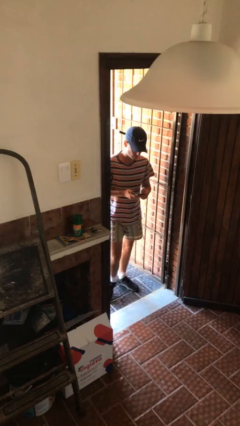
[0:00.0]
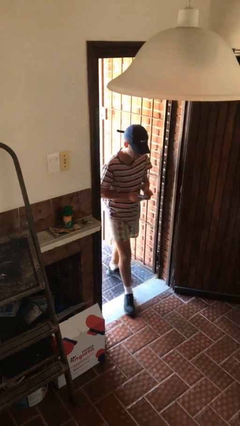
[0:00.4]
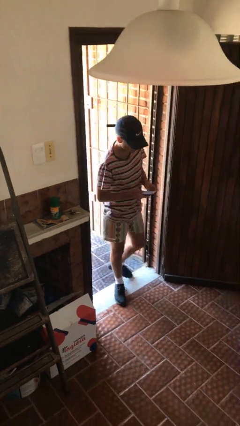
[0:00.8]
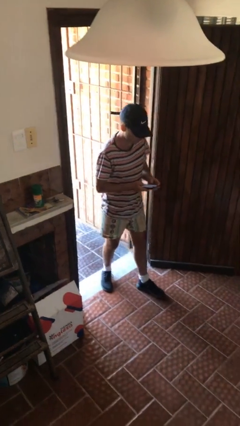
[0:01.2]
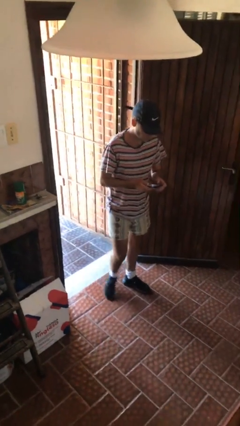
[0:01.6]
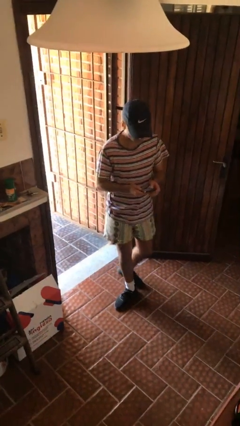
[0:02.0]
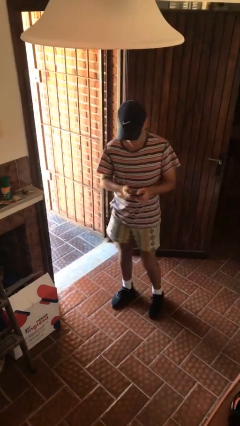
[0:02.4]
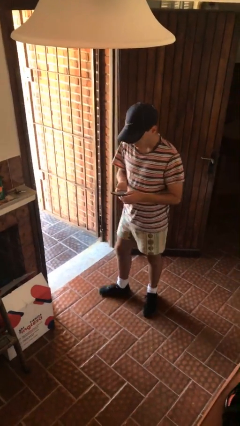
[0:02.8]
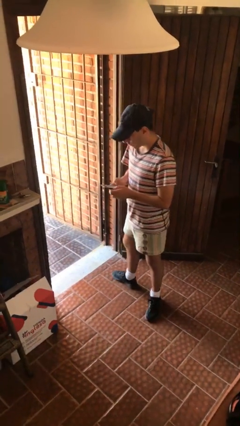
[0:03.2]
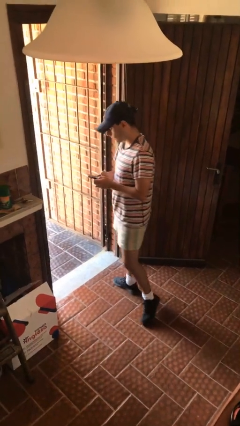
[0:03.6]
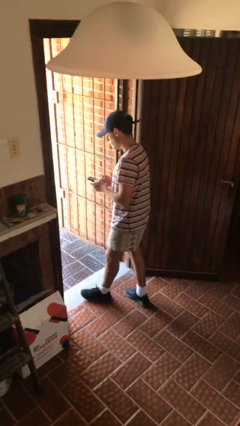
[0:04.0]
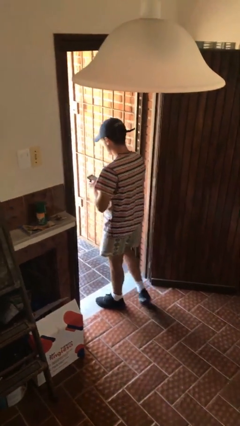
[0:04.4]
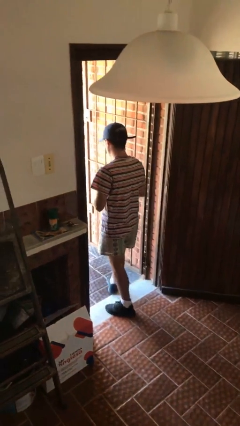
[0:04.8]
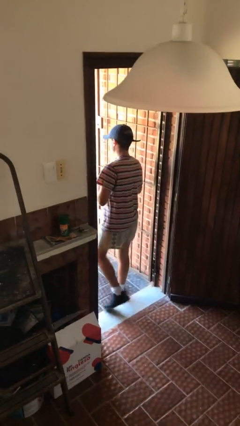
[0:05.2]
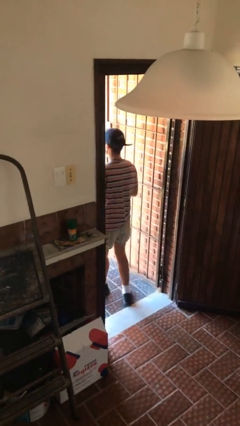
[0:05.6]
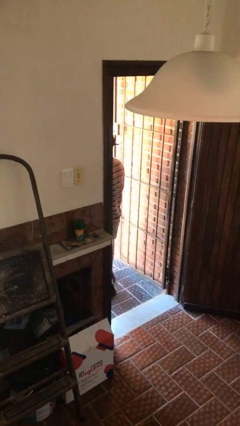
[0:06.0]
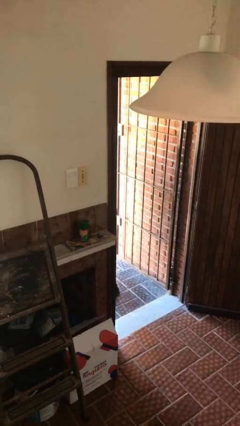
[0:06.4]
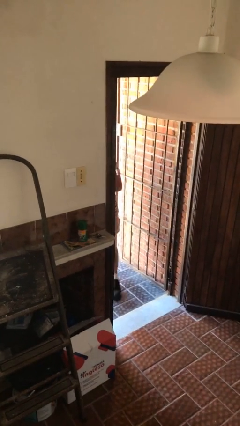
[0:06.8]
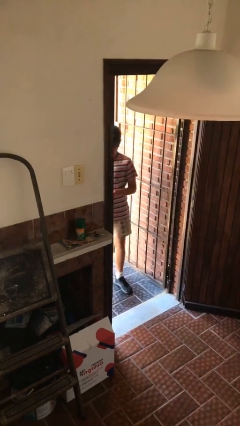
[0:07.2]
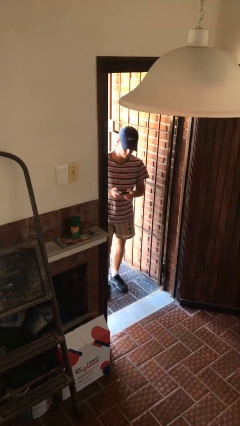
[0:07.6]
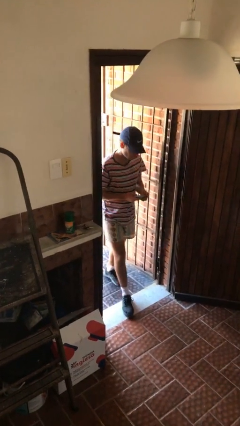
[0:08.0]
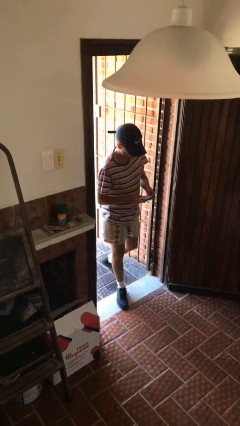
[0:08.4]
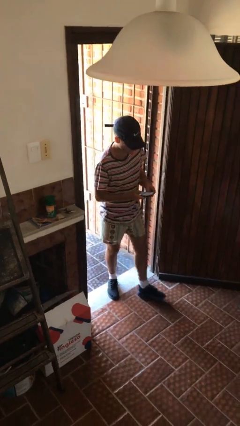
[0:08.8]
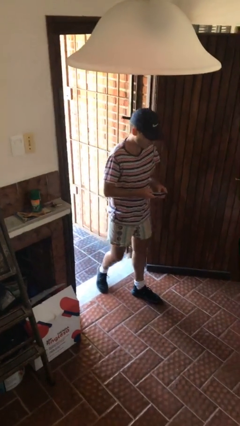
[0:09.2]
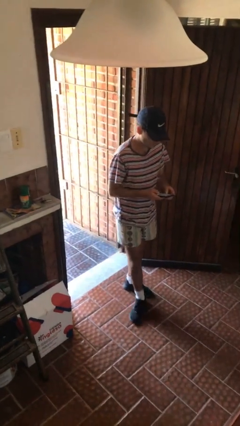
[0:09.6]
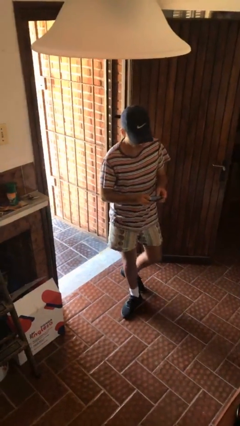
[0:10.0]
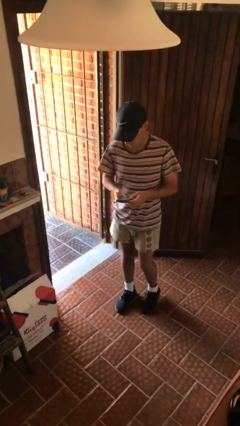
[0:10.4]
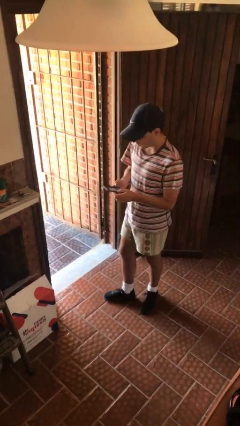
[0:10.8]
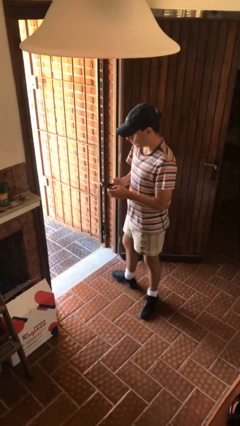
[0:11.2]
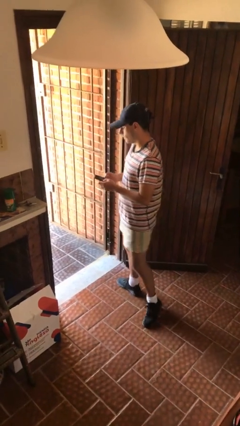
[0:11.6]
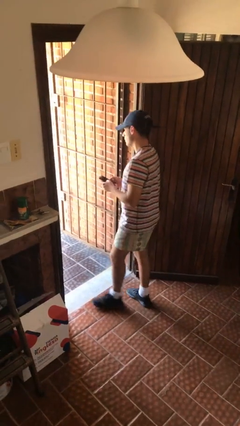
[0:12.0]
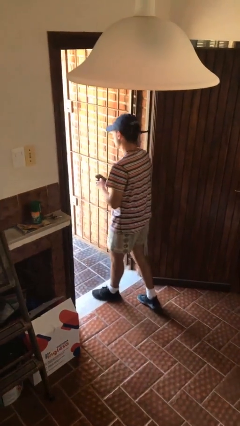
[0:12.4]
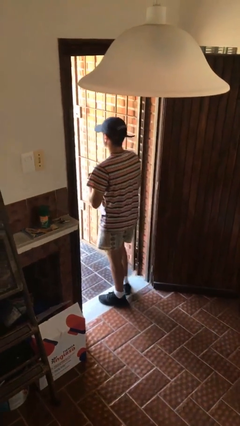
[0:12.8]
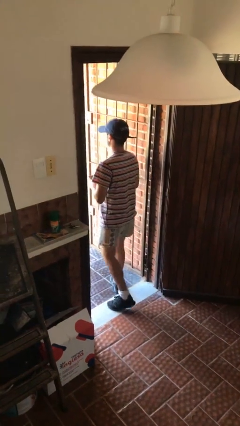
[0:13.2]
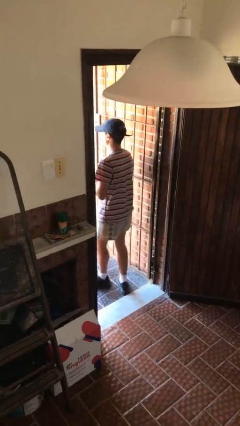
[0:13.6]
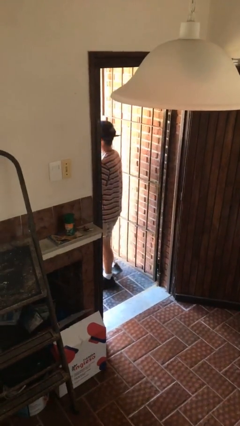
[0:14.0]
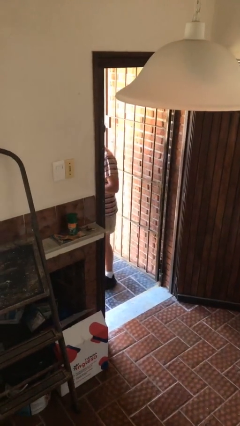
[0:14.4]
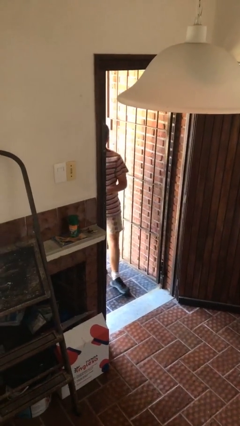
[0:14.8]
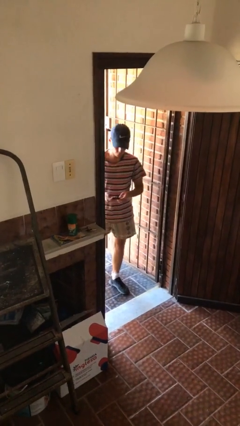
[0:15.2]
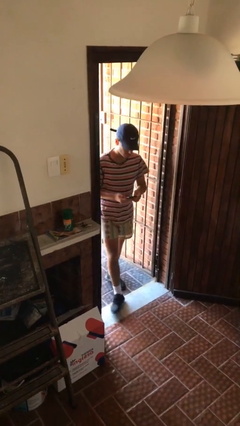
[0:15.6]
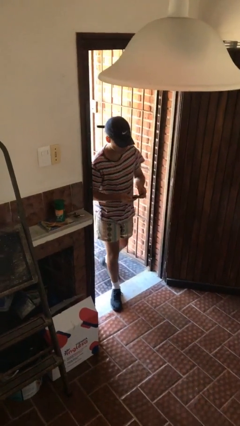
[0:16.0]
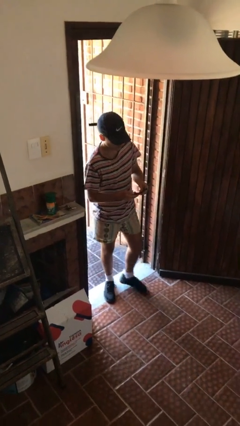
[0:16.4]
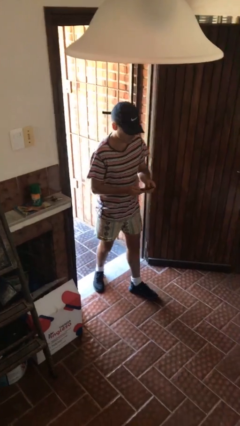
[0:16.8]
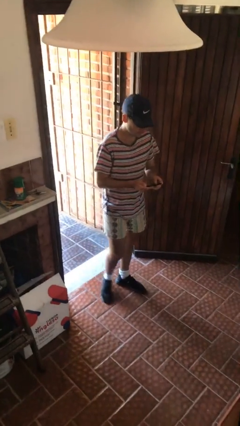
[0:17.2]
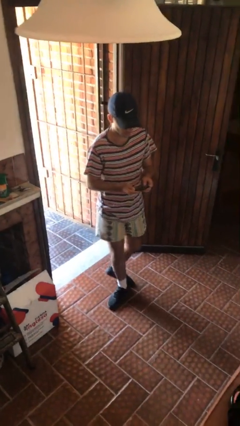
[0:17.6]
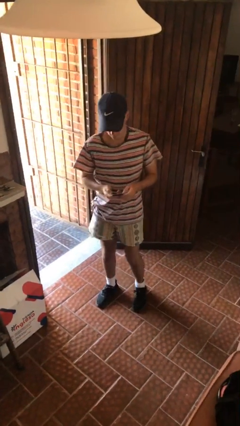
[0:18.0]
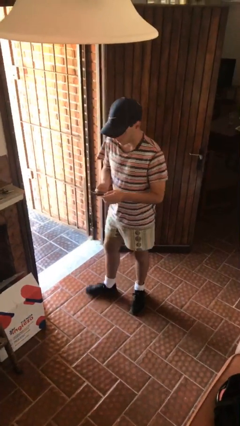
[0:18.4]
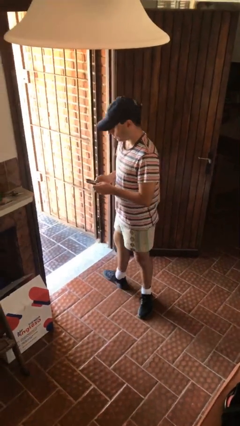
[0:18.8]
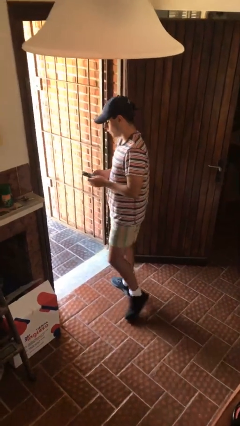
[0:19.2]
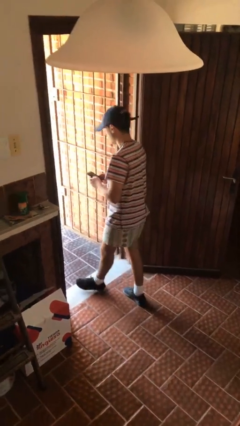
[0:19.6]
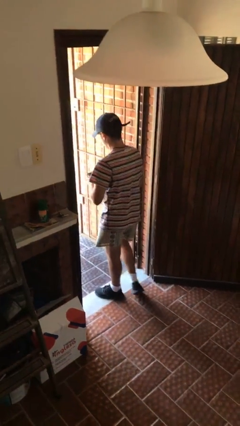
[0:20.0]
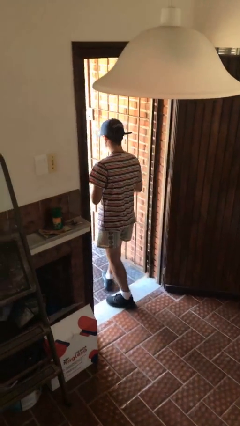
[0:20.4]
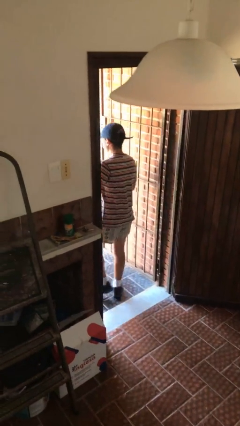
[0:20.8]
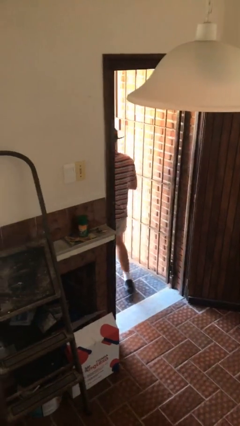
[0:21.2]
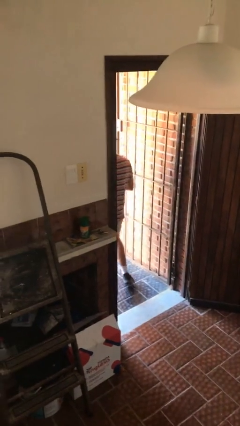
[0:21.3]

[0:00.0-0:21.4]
person texts on phone

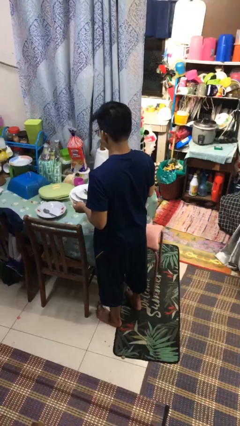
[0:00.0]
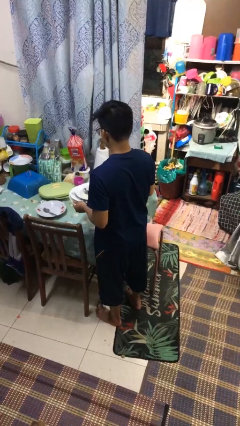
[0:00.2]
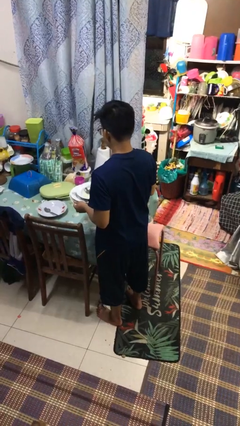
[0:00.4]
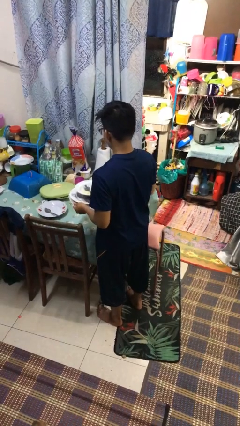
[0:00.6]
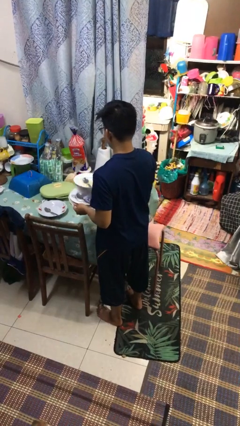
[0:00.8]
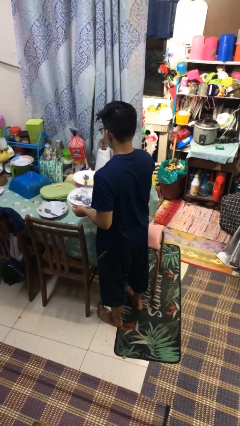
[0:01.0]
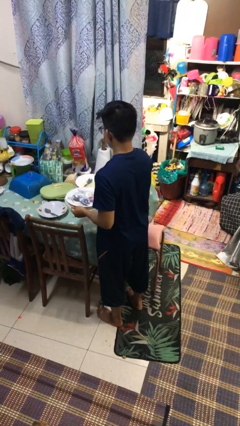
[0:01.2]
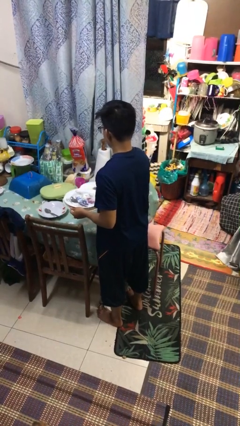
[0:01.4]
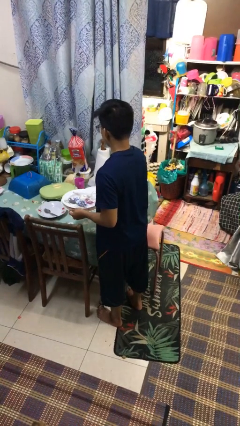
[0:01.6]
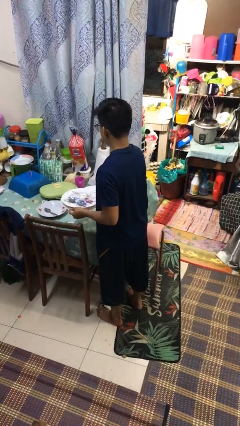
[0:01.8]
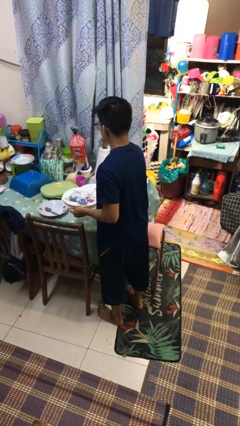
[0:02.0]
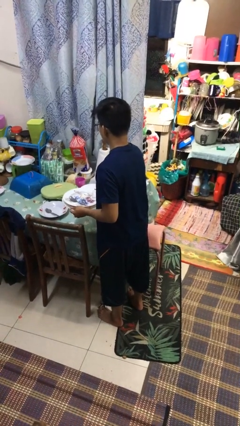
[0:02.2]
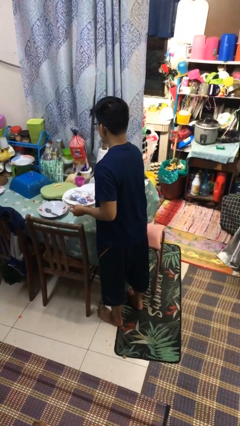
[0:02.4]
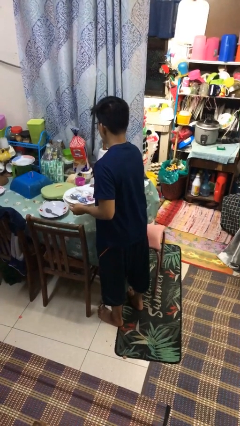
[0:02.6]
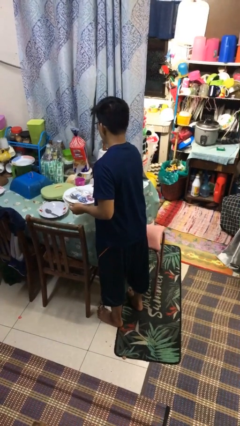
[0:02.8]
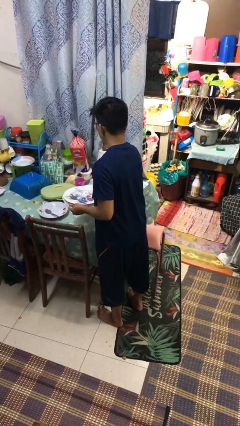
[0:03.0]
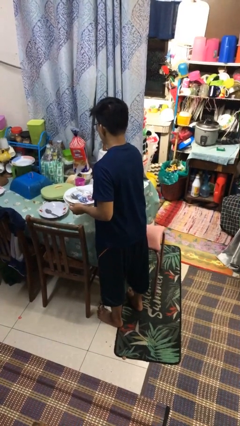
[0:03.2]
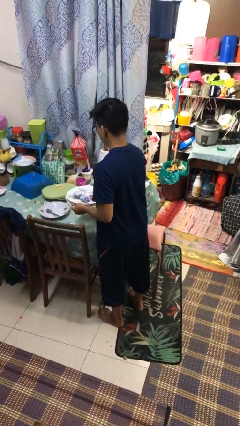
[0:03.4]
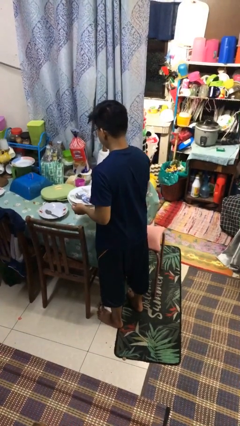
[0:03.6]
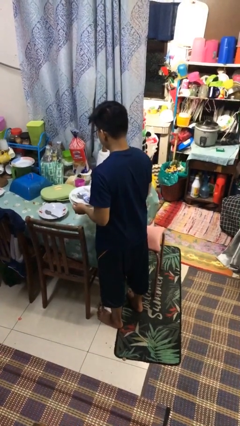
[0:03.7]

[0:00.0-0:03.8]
person sets table

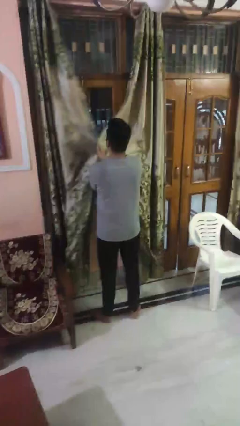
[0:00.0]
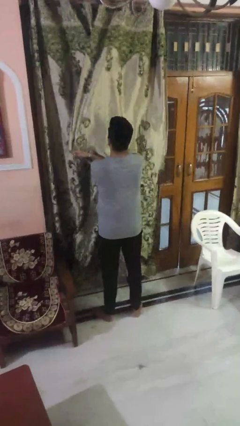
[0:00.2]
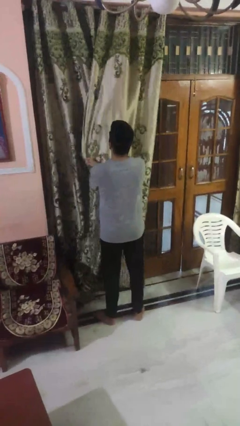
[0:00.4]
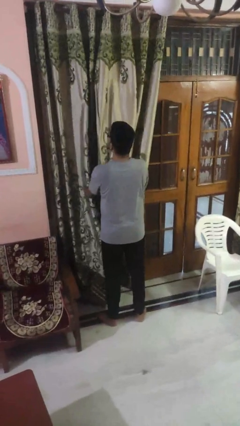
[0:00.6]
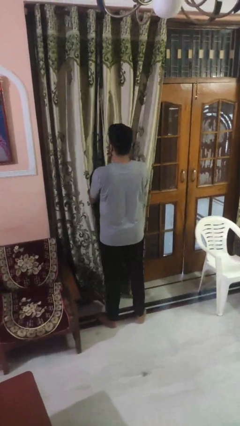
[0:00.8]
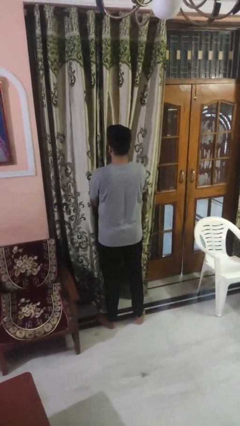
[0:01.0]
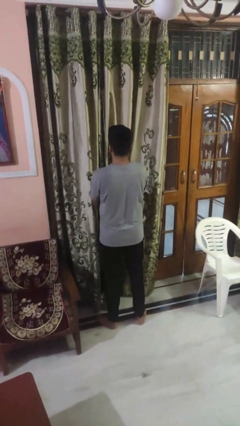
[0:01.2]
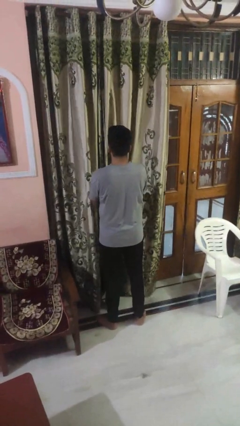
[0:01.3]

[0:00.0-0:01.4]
person closes curtains

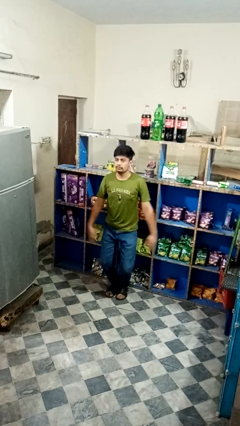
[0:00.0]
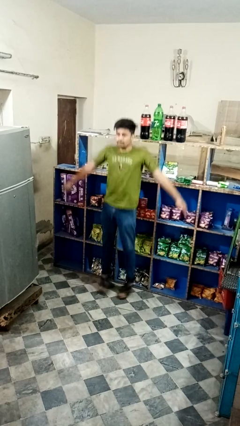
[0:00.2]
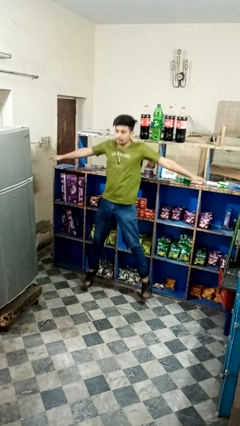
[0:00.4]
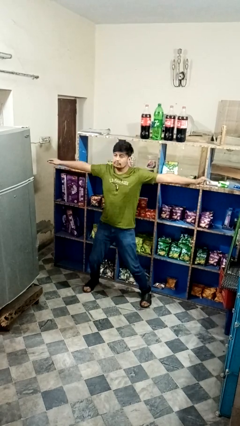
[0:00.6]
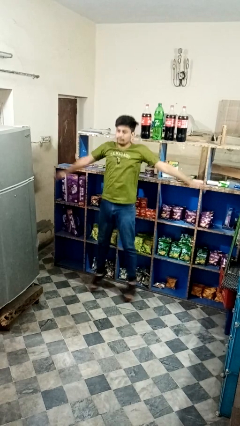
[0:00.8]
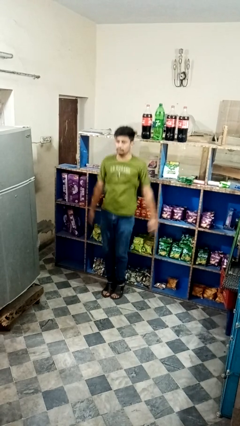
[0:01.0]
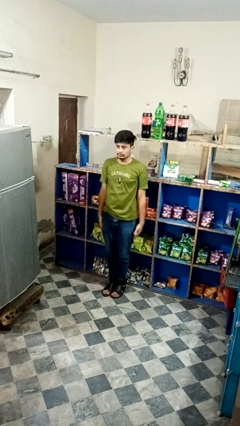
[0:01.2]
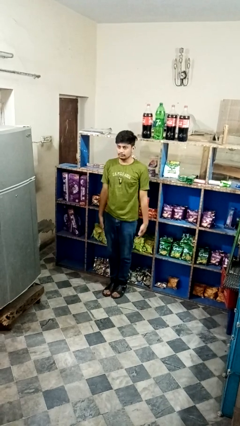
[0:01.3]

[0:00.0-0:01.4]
person exercises with jumping jacks

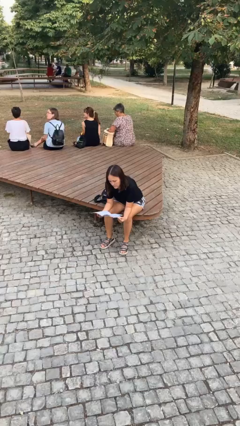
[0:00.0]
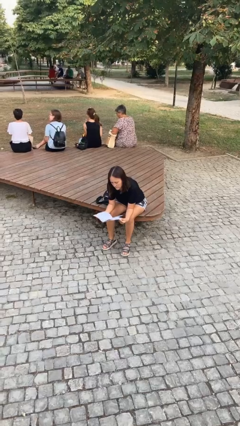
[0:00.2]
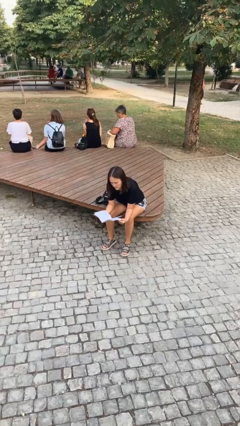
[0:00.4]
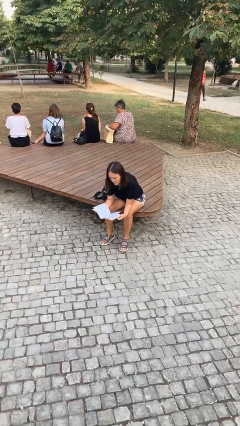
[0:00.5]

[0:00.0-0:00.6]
person drops object
